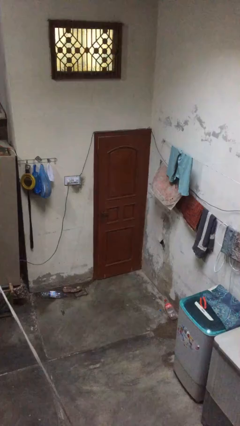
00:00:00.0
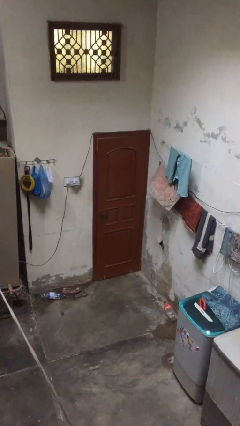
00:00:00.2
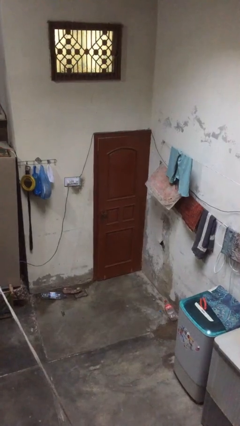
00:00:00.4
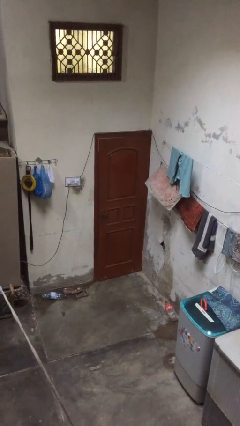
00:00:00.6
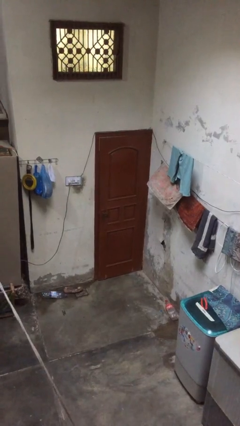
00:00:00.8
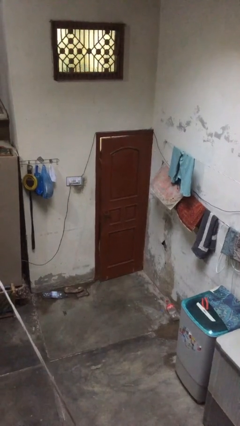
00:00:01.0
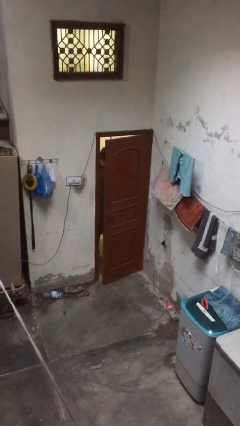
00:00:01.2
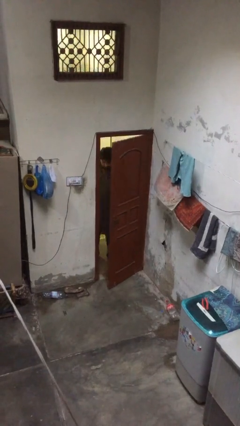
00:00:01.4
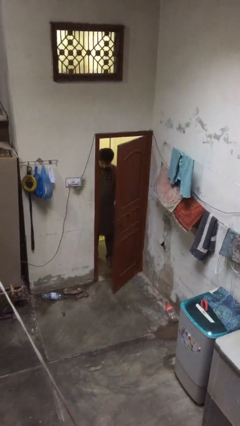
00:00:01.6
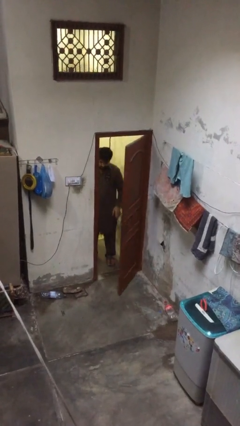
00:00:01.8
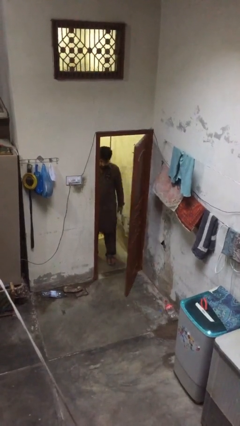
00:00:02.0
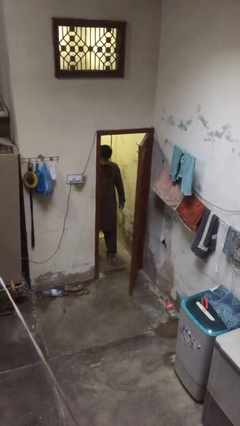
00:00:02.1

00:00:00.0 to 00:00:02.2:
person opens facility door

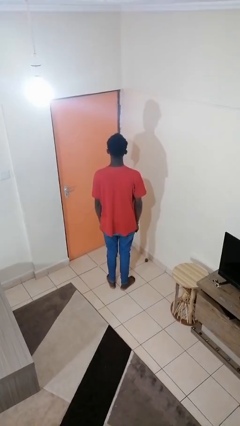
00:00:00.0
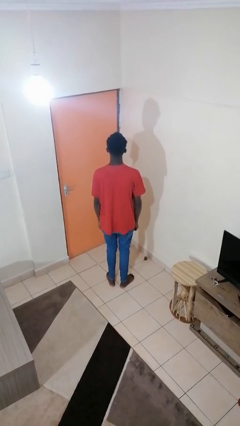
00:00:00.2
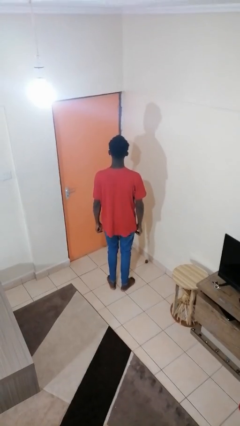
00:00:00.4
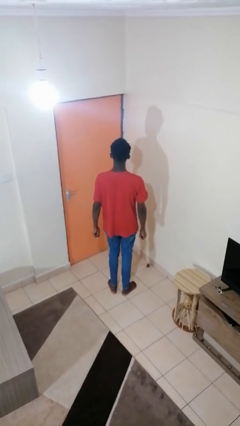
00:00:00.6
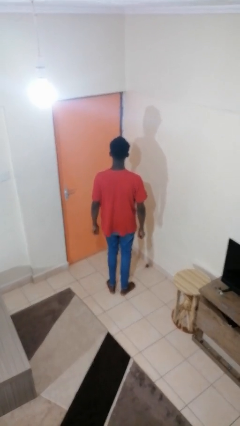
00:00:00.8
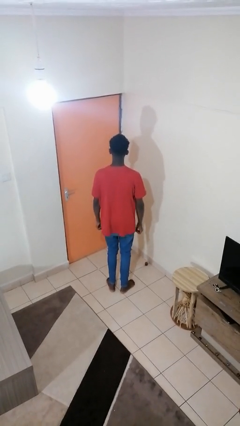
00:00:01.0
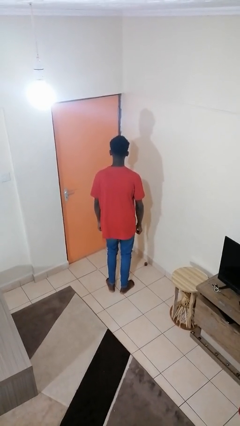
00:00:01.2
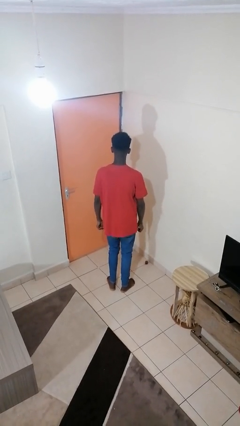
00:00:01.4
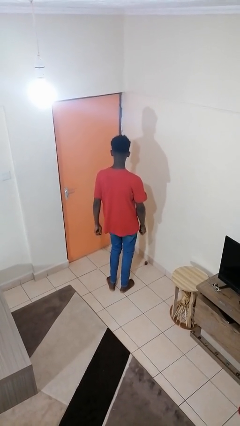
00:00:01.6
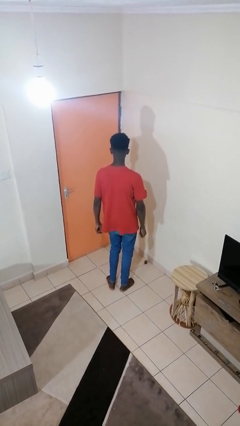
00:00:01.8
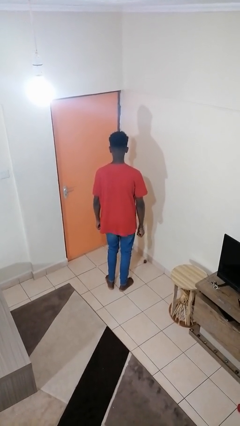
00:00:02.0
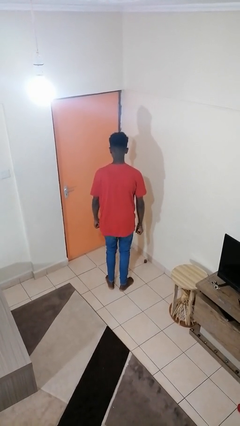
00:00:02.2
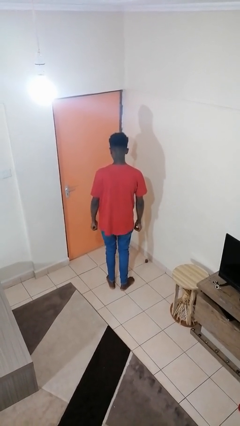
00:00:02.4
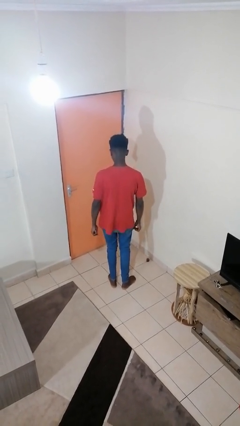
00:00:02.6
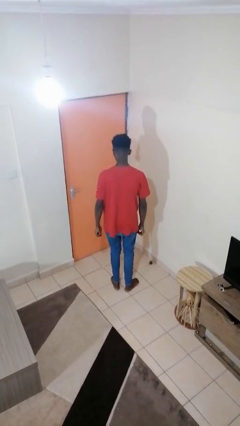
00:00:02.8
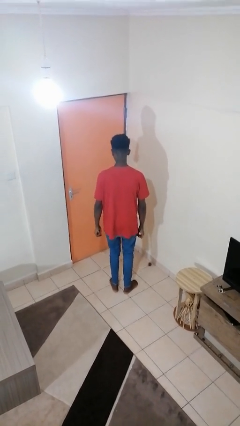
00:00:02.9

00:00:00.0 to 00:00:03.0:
person wiggles hips

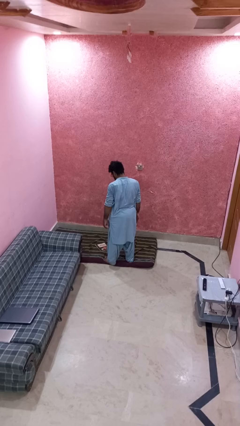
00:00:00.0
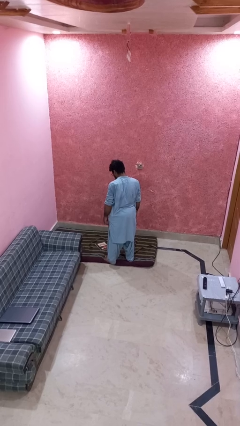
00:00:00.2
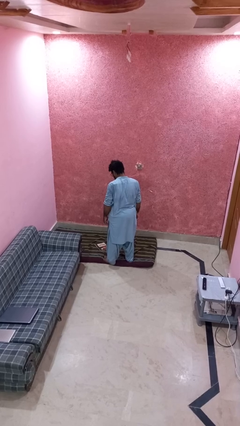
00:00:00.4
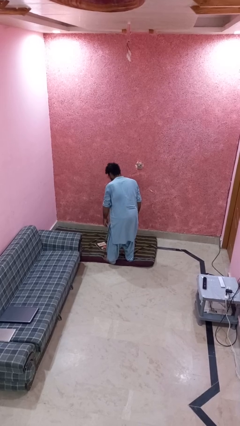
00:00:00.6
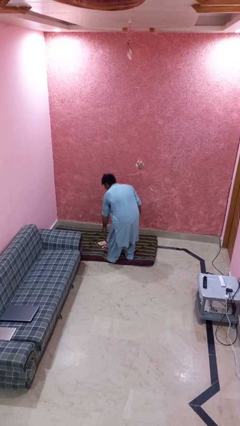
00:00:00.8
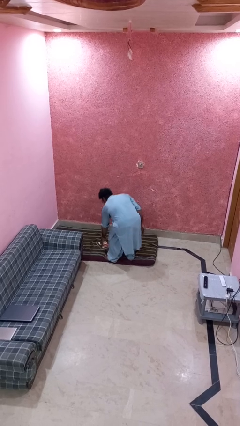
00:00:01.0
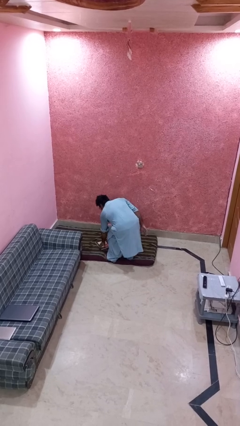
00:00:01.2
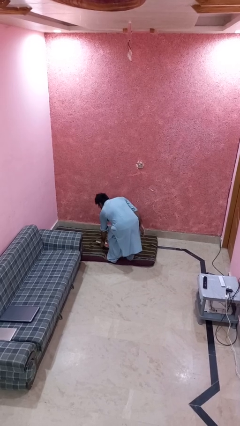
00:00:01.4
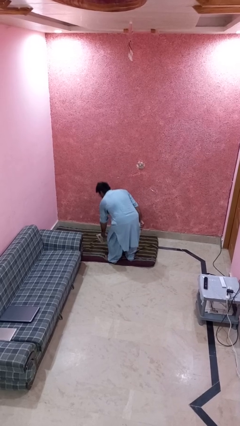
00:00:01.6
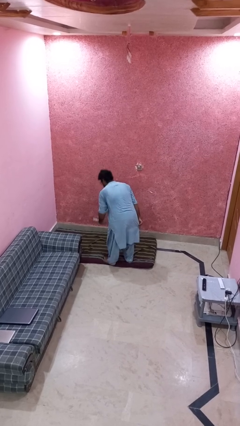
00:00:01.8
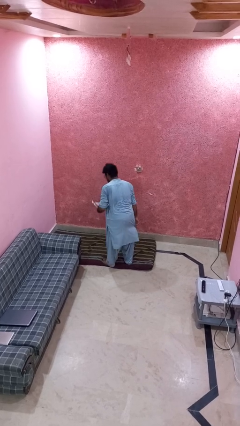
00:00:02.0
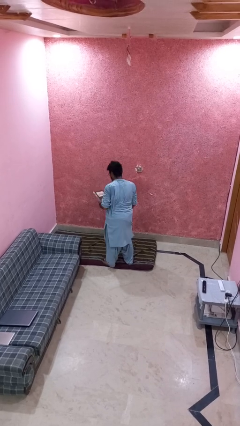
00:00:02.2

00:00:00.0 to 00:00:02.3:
person picks up object from floor

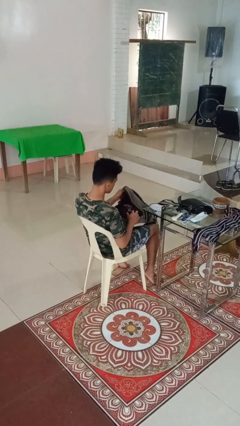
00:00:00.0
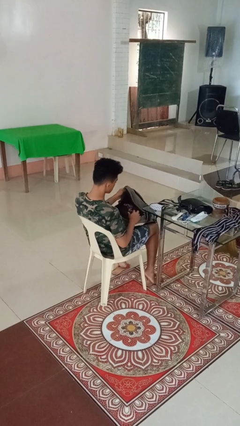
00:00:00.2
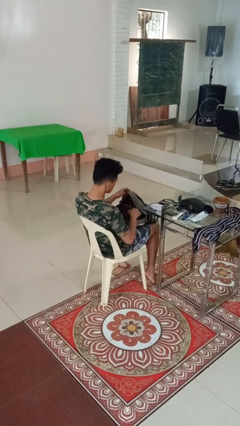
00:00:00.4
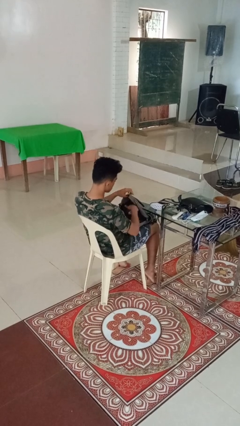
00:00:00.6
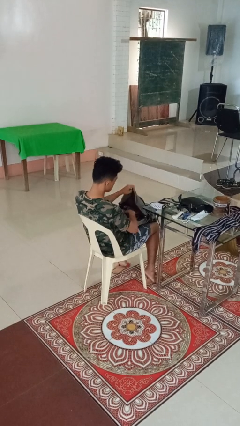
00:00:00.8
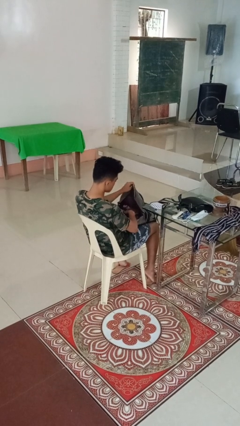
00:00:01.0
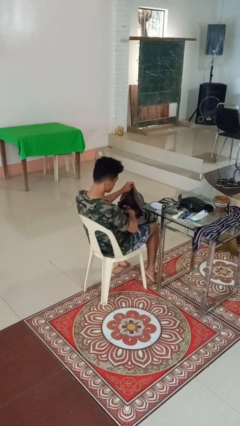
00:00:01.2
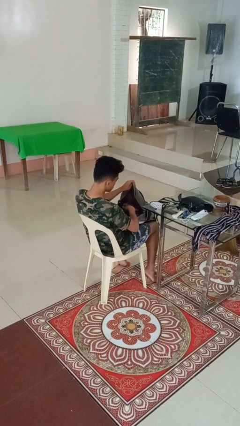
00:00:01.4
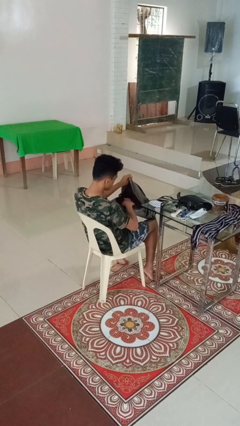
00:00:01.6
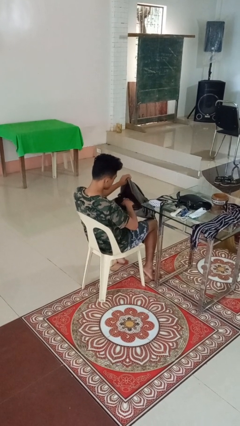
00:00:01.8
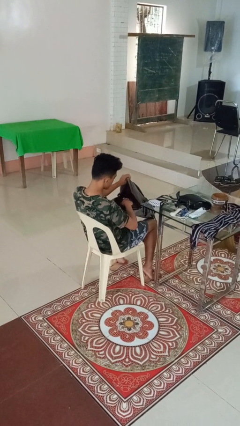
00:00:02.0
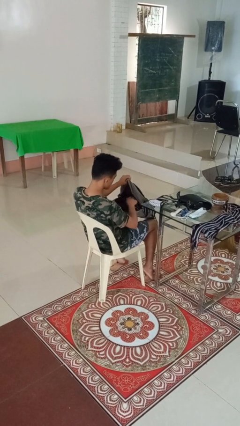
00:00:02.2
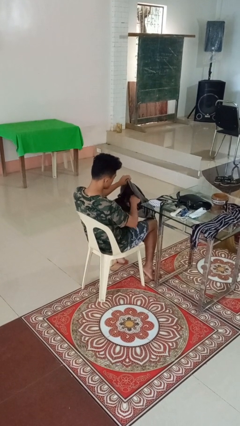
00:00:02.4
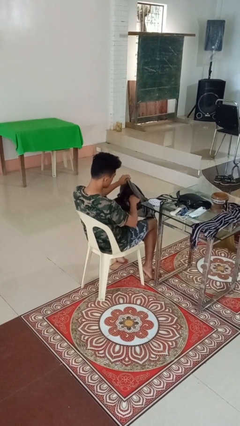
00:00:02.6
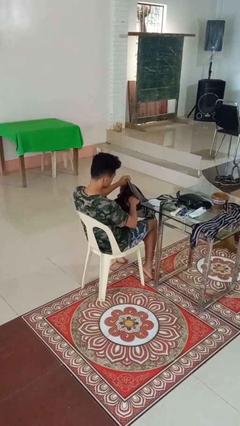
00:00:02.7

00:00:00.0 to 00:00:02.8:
person searches in backpack

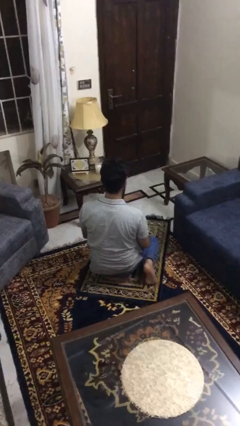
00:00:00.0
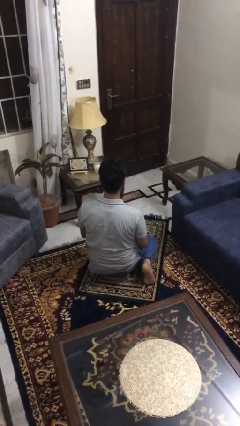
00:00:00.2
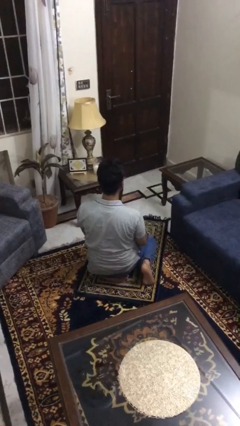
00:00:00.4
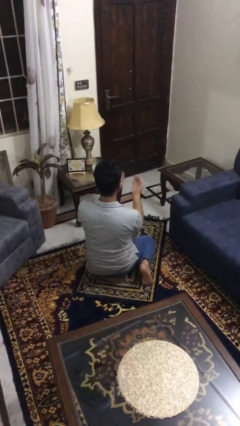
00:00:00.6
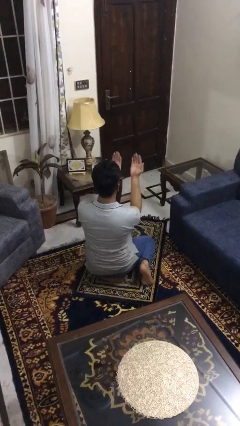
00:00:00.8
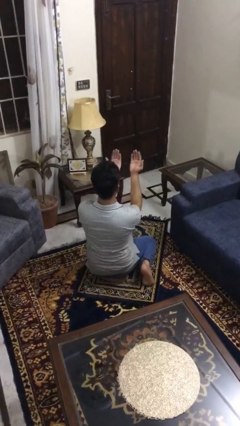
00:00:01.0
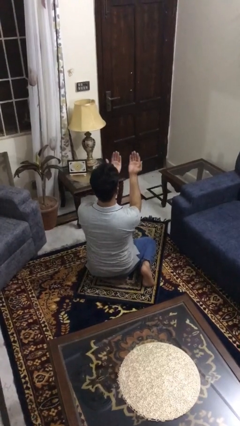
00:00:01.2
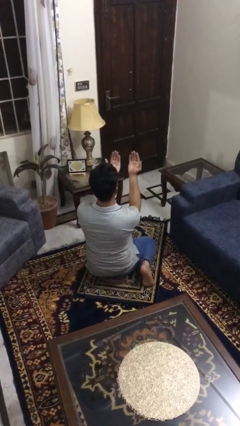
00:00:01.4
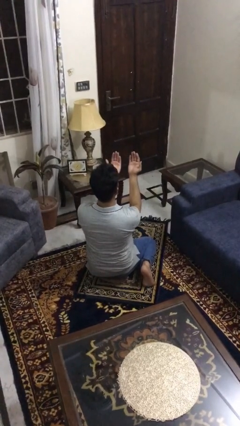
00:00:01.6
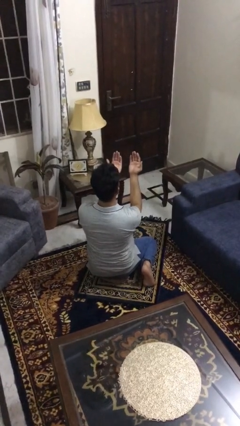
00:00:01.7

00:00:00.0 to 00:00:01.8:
person prays

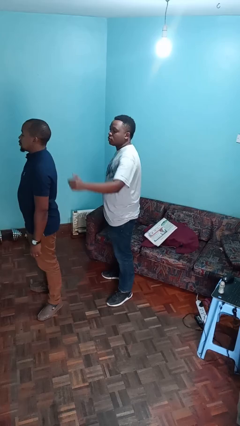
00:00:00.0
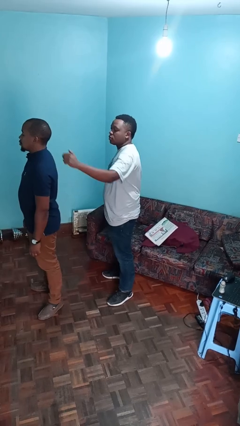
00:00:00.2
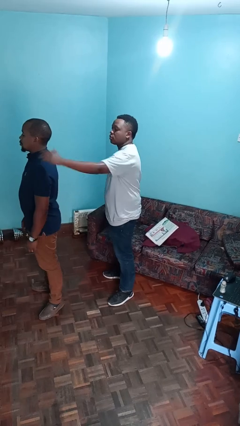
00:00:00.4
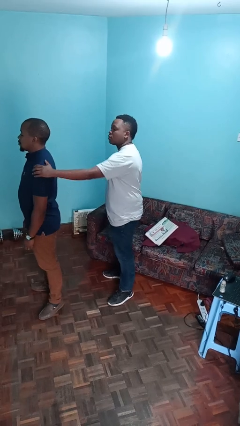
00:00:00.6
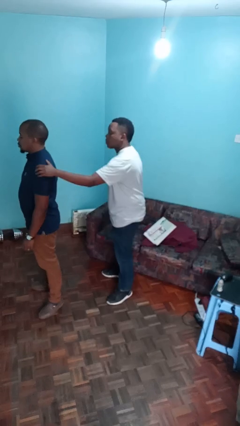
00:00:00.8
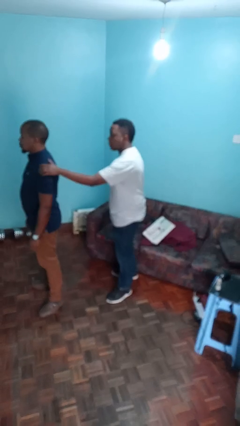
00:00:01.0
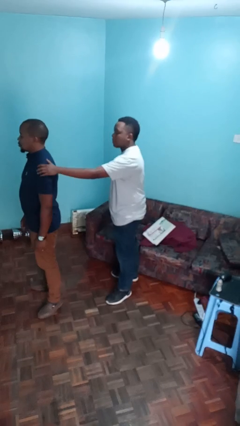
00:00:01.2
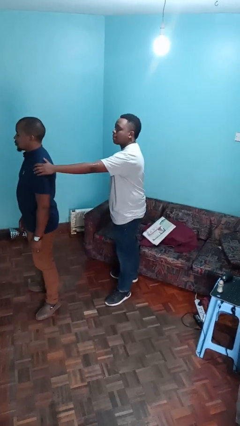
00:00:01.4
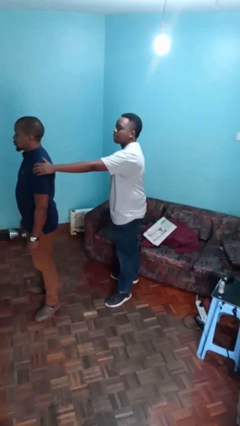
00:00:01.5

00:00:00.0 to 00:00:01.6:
person grabs person by shoulder

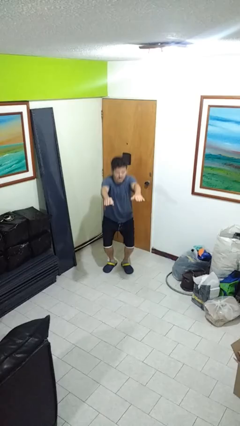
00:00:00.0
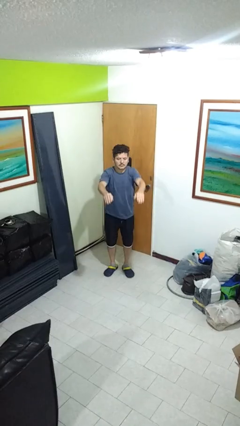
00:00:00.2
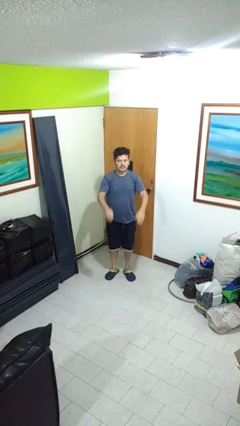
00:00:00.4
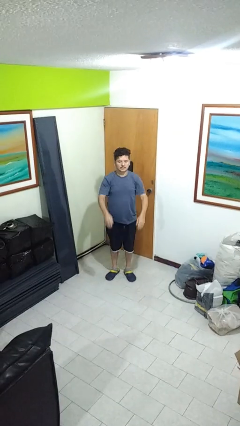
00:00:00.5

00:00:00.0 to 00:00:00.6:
person stands up

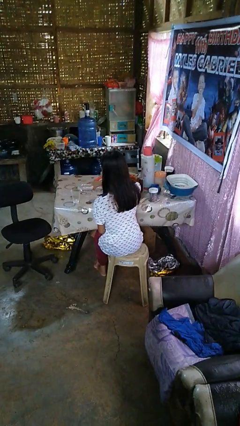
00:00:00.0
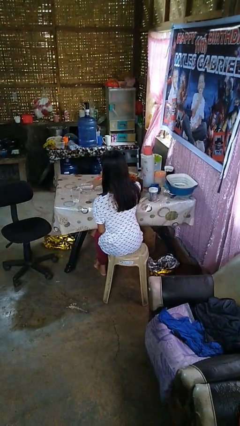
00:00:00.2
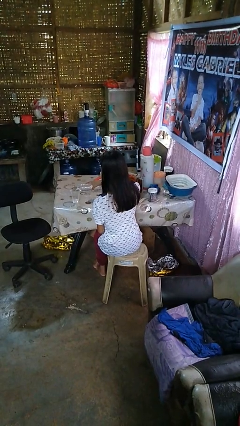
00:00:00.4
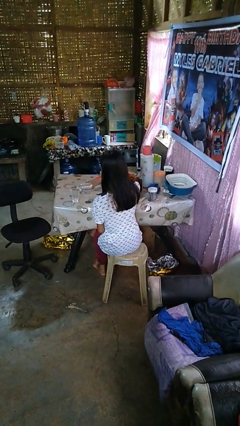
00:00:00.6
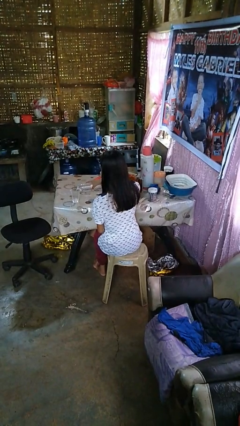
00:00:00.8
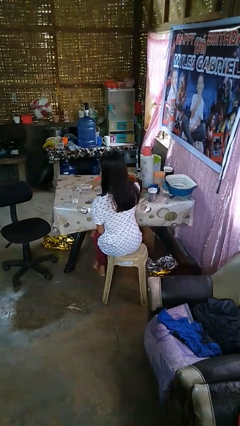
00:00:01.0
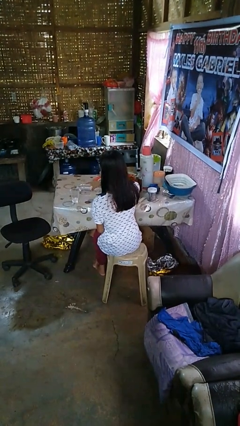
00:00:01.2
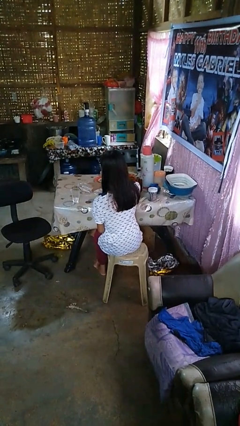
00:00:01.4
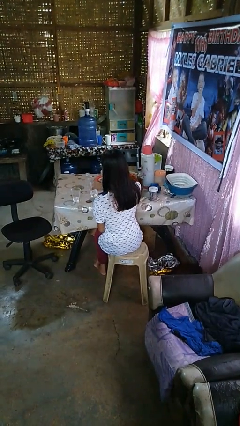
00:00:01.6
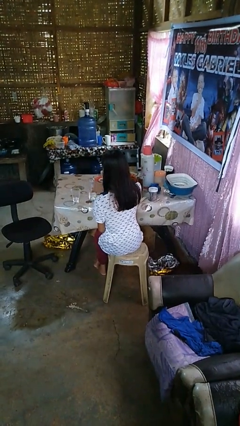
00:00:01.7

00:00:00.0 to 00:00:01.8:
person pours liquid into cup

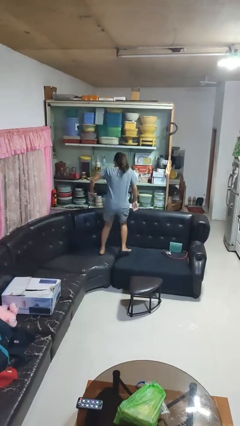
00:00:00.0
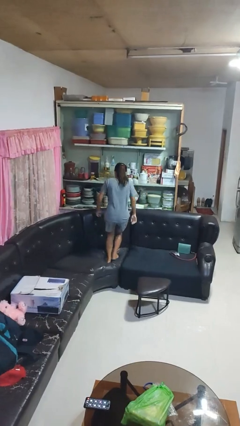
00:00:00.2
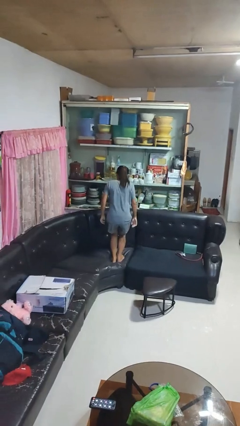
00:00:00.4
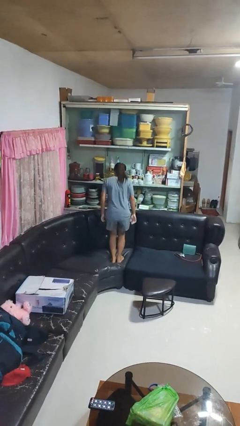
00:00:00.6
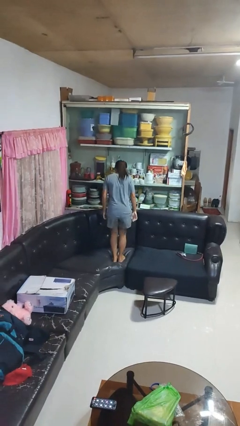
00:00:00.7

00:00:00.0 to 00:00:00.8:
person jumps on couch
